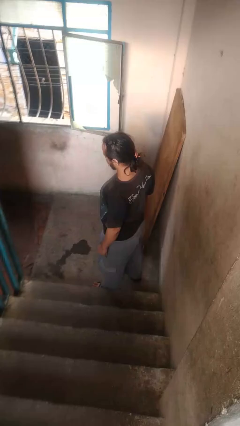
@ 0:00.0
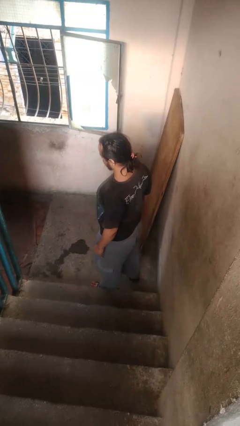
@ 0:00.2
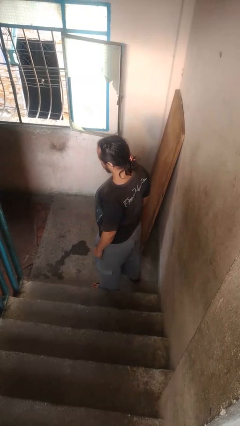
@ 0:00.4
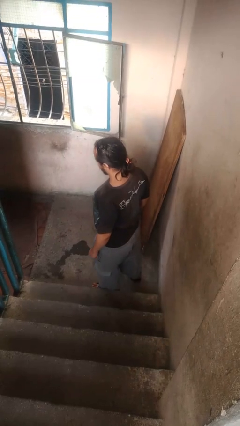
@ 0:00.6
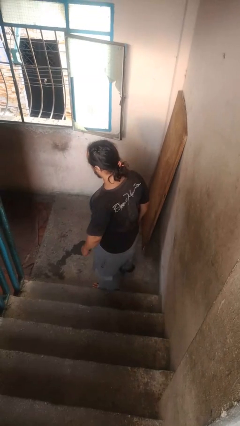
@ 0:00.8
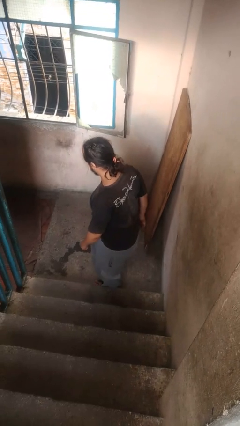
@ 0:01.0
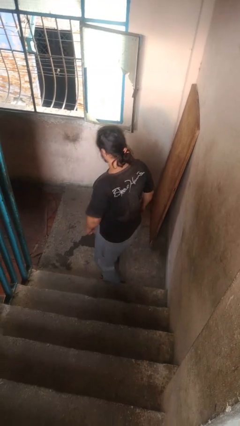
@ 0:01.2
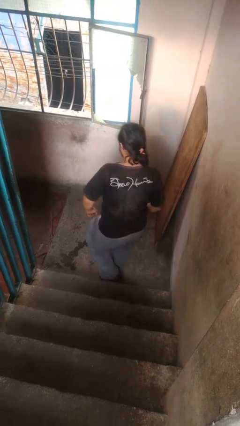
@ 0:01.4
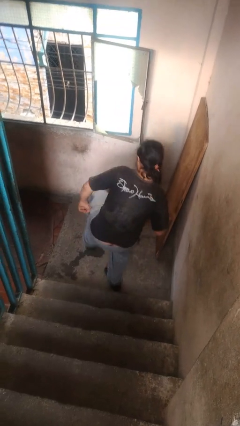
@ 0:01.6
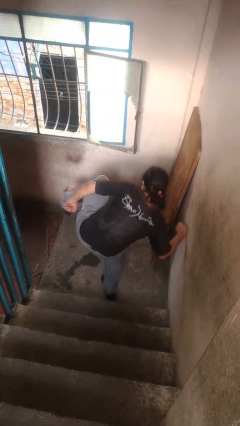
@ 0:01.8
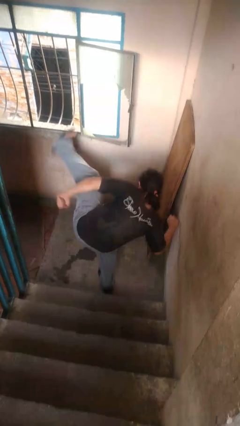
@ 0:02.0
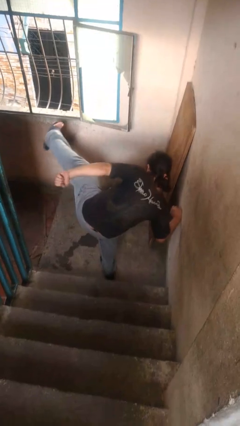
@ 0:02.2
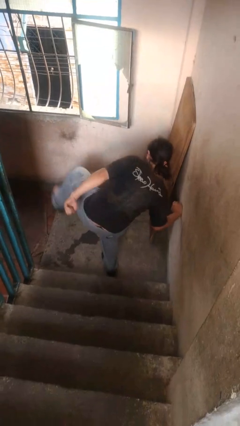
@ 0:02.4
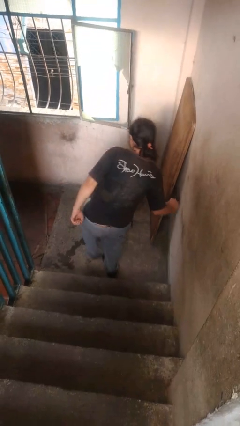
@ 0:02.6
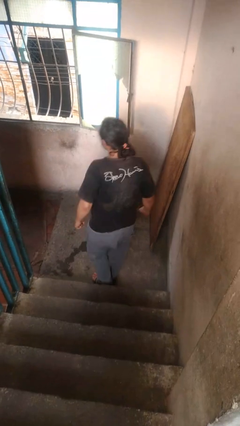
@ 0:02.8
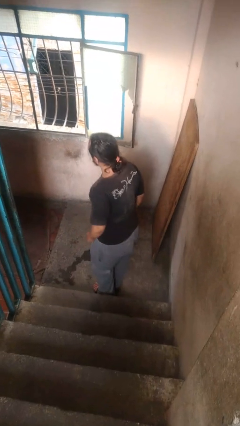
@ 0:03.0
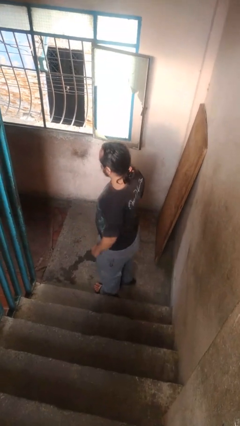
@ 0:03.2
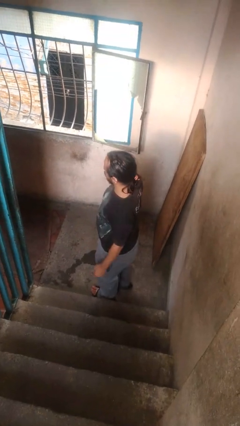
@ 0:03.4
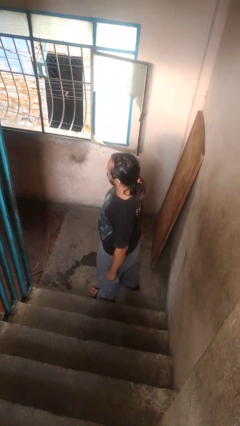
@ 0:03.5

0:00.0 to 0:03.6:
person karate kicks

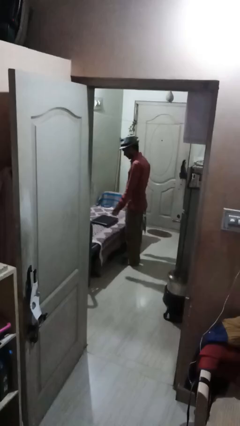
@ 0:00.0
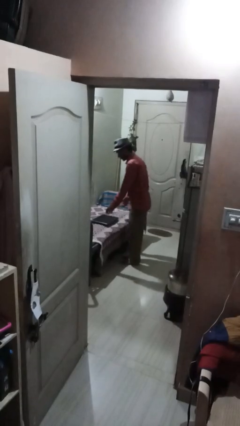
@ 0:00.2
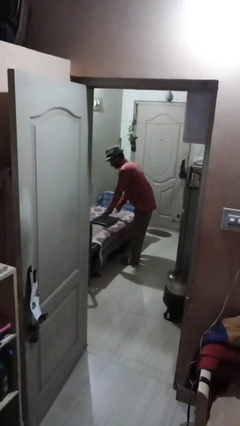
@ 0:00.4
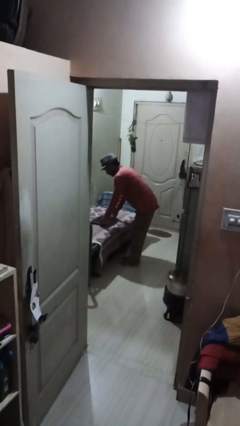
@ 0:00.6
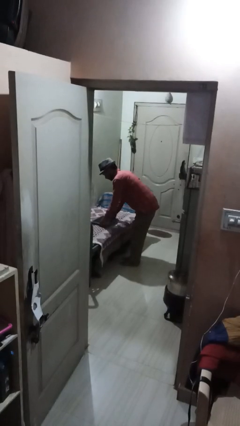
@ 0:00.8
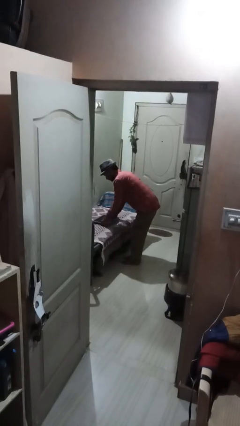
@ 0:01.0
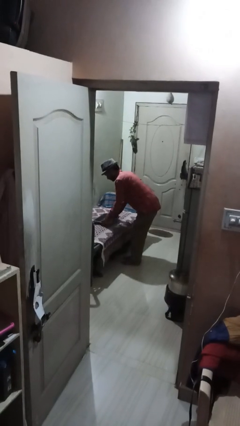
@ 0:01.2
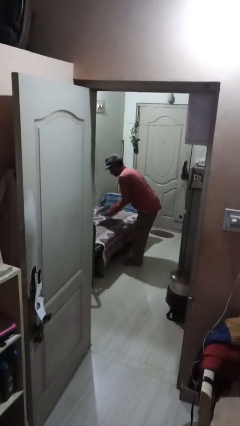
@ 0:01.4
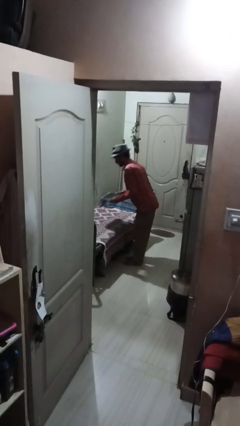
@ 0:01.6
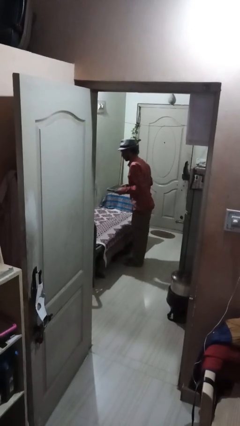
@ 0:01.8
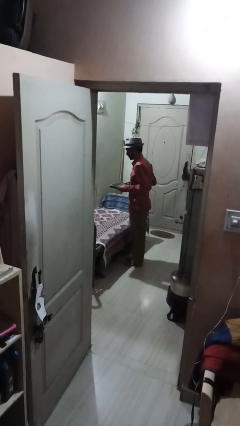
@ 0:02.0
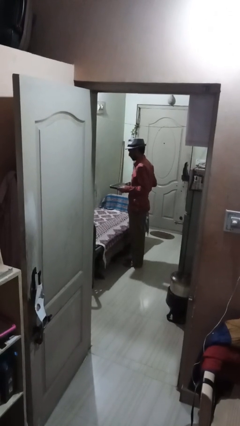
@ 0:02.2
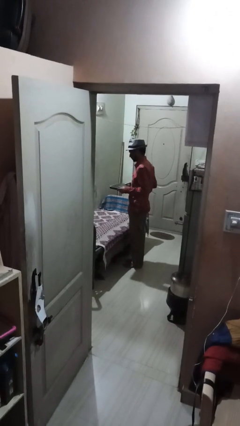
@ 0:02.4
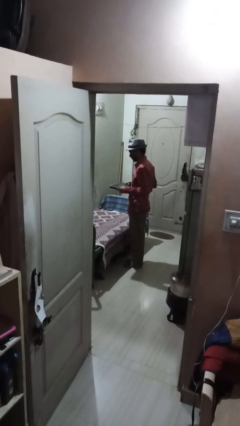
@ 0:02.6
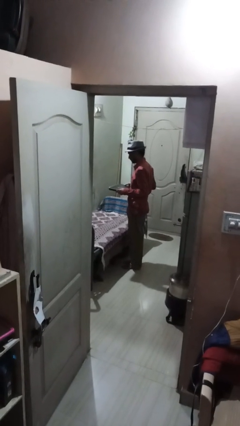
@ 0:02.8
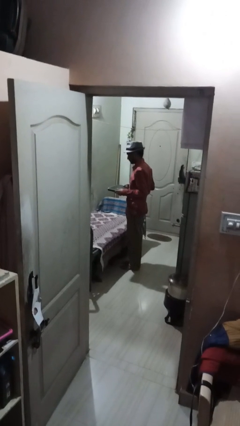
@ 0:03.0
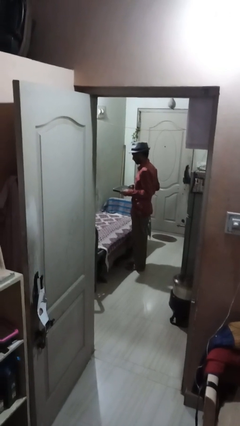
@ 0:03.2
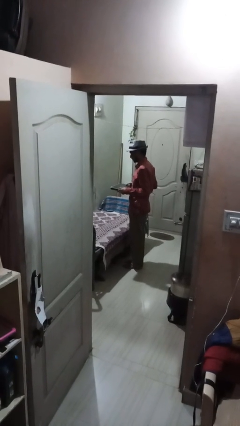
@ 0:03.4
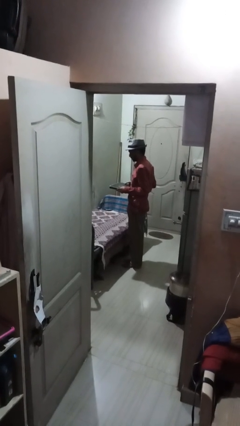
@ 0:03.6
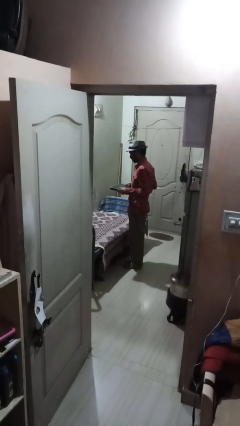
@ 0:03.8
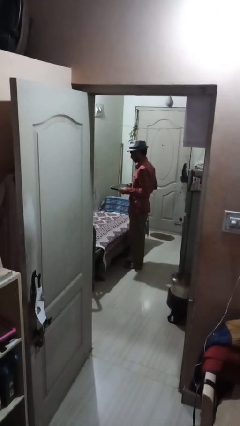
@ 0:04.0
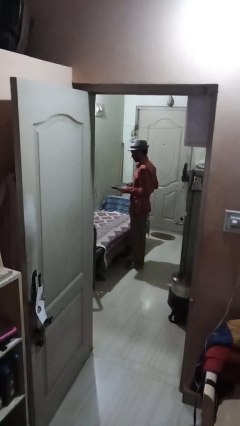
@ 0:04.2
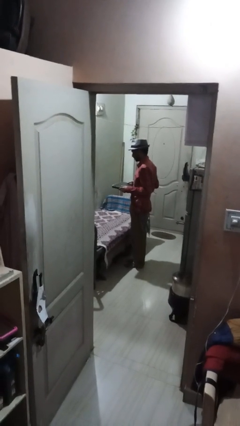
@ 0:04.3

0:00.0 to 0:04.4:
person picks up object from couch

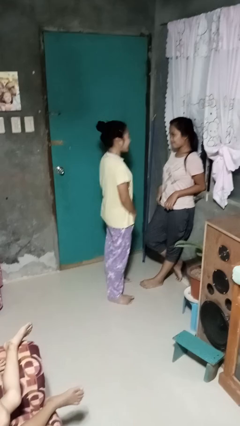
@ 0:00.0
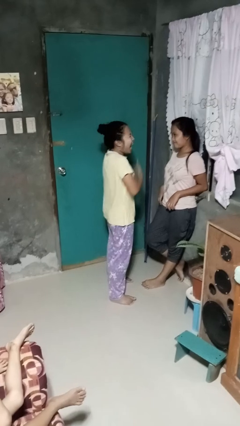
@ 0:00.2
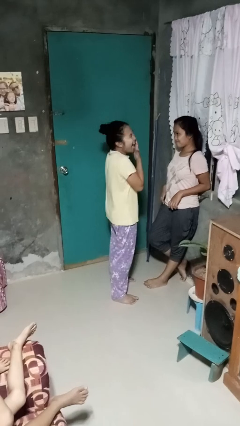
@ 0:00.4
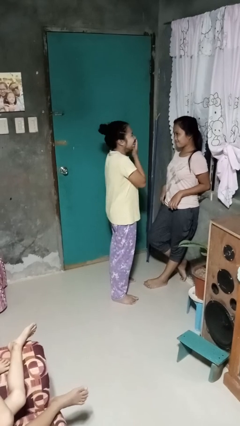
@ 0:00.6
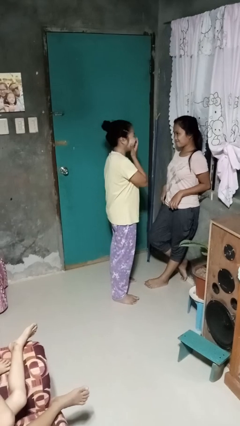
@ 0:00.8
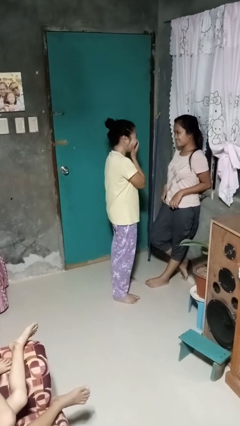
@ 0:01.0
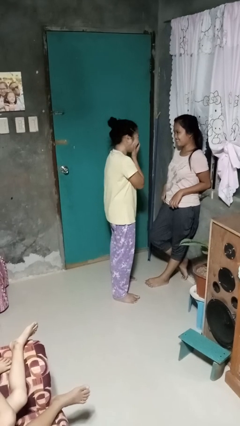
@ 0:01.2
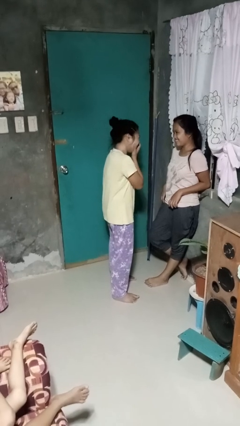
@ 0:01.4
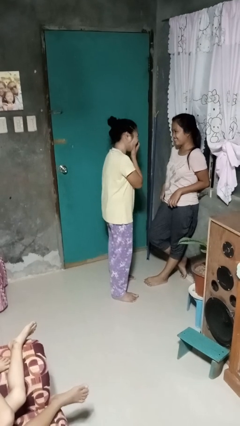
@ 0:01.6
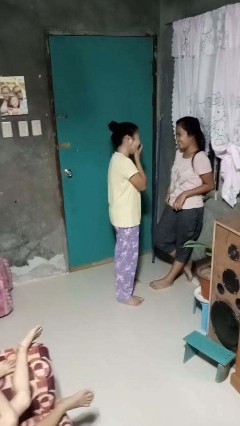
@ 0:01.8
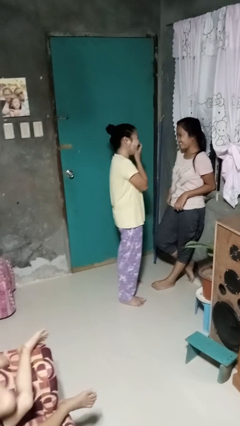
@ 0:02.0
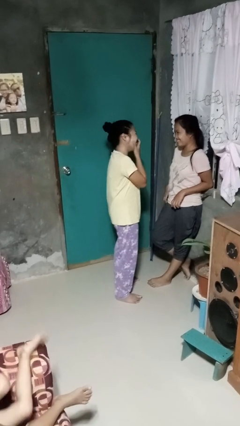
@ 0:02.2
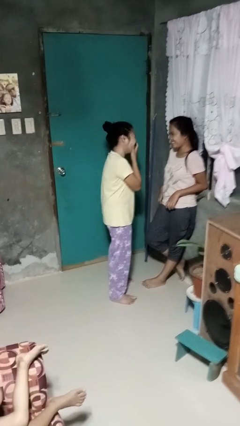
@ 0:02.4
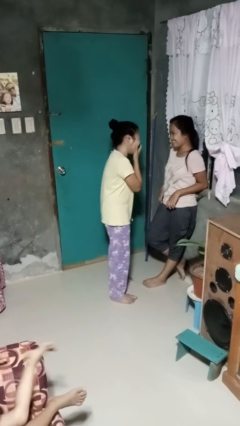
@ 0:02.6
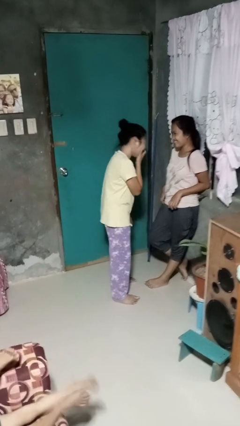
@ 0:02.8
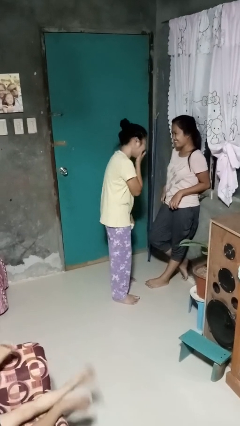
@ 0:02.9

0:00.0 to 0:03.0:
person laughs with person

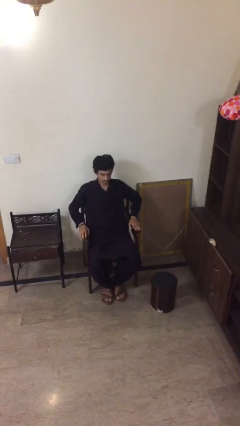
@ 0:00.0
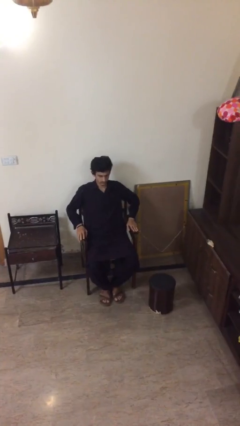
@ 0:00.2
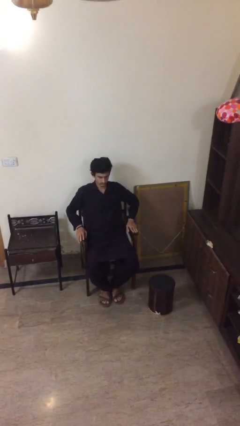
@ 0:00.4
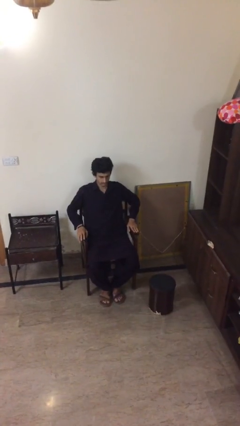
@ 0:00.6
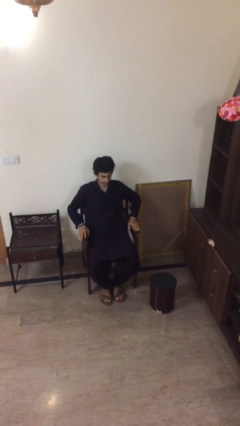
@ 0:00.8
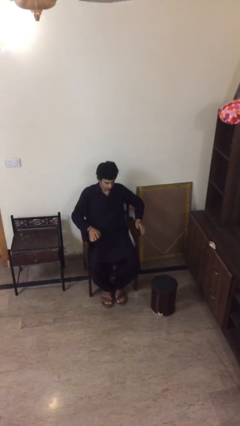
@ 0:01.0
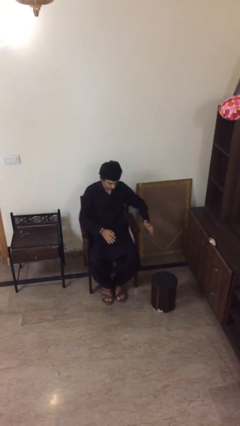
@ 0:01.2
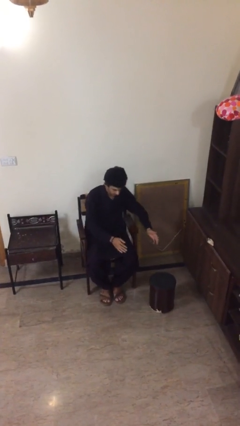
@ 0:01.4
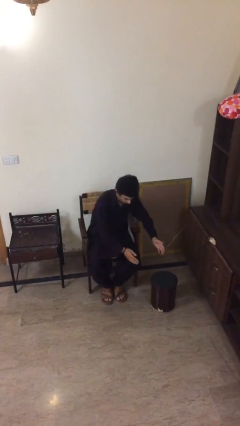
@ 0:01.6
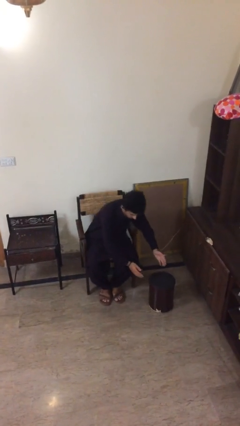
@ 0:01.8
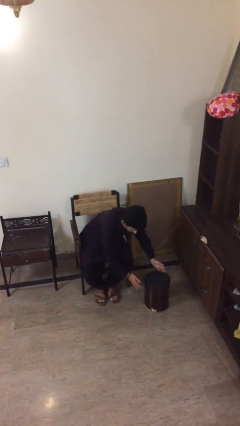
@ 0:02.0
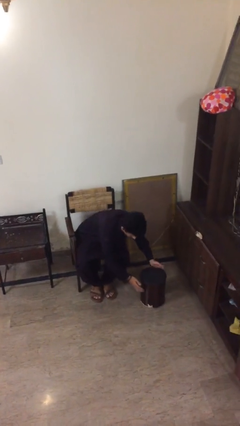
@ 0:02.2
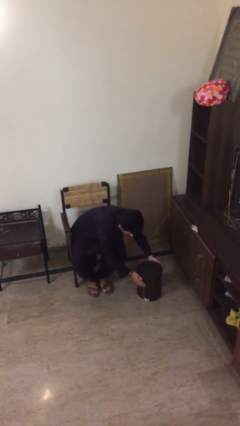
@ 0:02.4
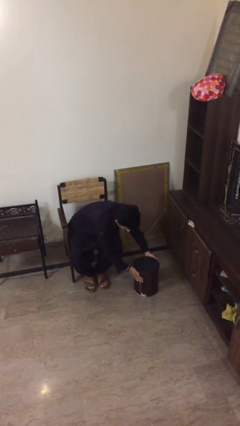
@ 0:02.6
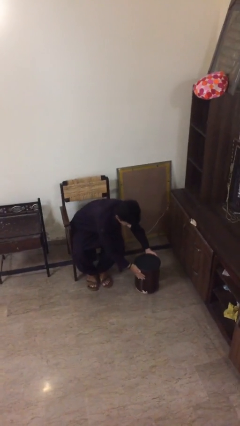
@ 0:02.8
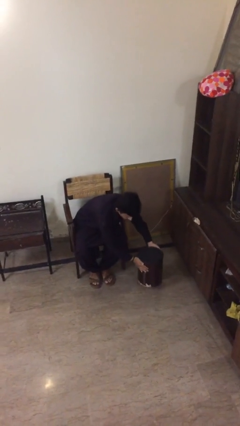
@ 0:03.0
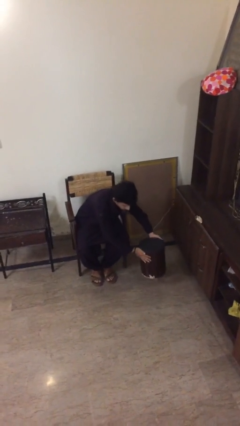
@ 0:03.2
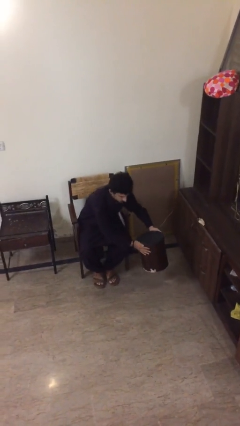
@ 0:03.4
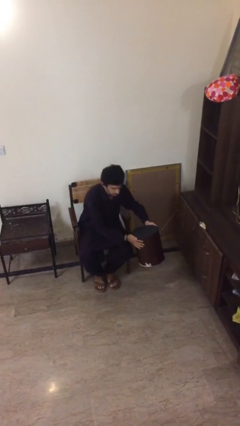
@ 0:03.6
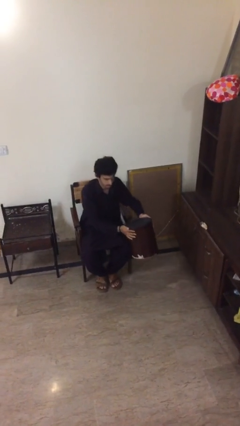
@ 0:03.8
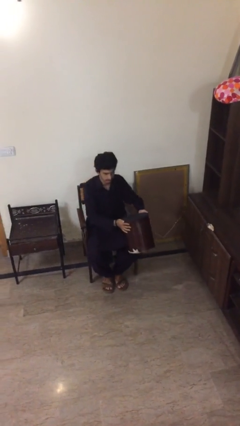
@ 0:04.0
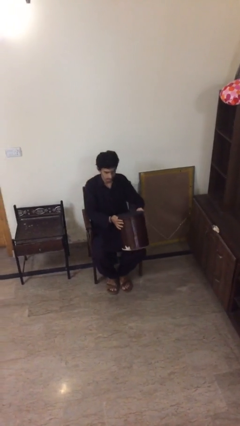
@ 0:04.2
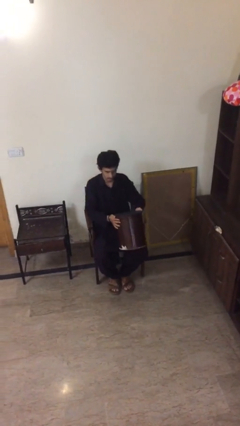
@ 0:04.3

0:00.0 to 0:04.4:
person picks up object from floor

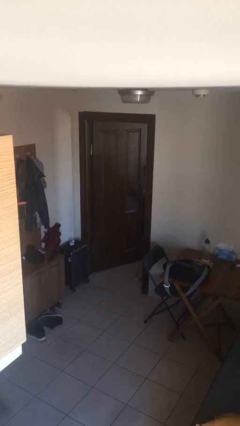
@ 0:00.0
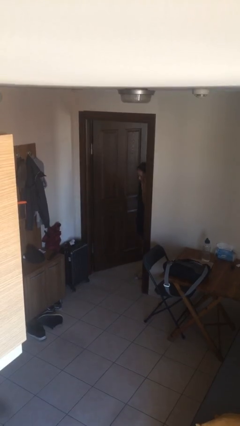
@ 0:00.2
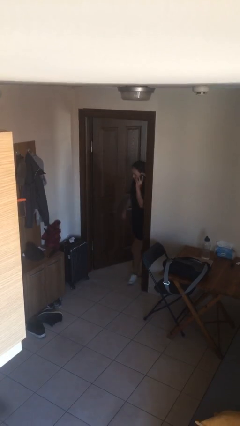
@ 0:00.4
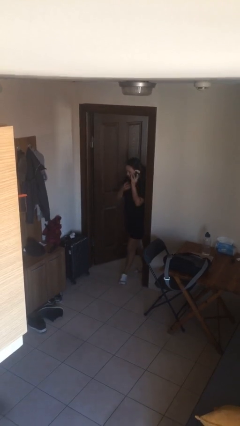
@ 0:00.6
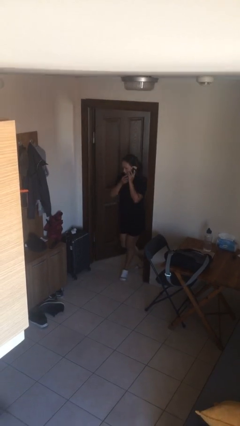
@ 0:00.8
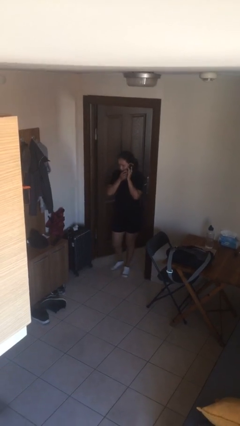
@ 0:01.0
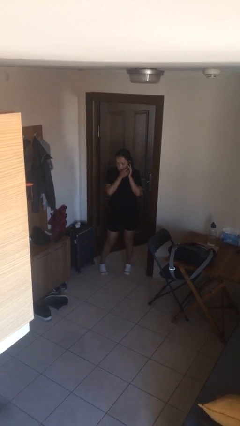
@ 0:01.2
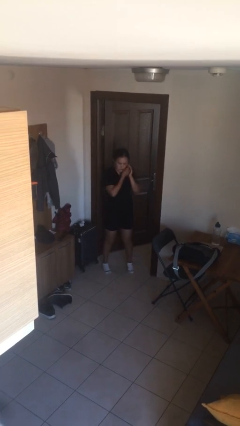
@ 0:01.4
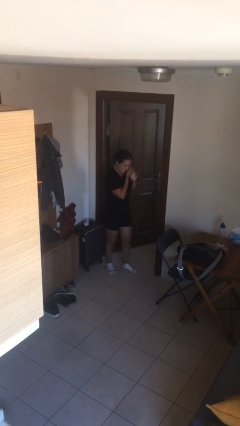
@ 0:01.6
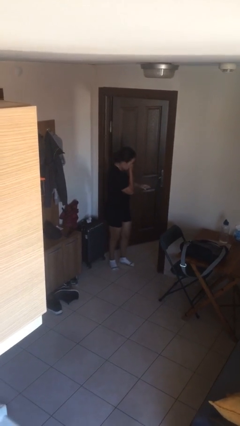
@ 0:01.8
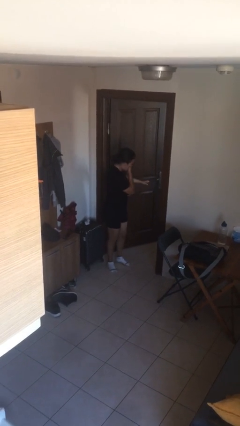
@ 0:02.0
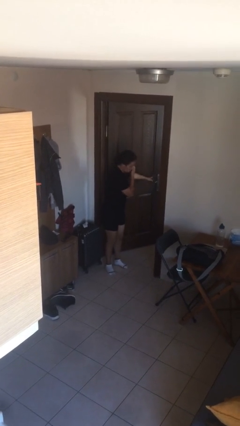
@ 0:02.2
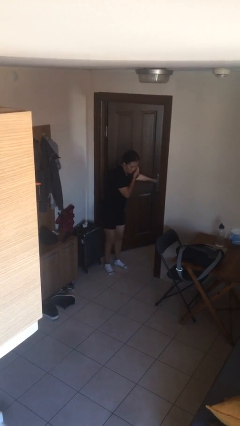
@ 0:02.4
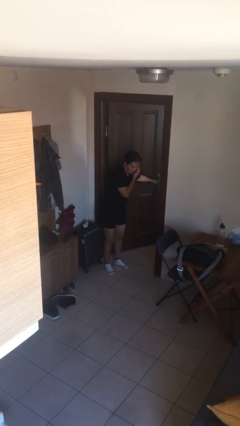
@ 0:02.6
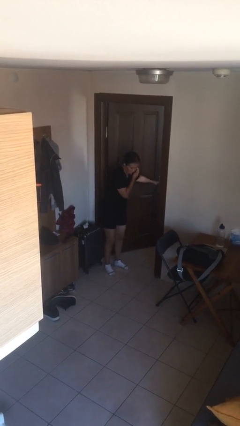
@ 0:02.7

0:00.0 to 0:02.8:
person enters scene through structure
